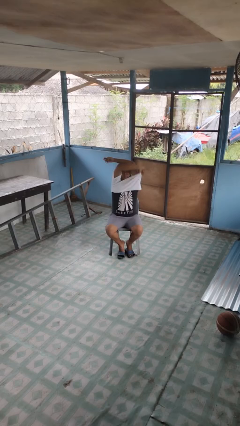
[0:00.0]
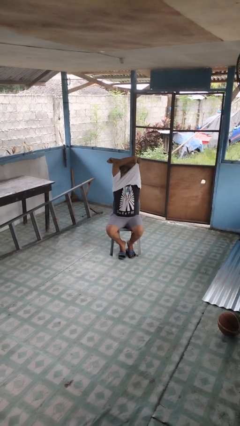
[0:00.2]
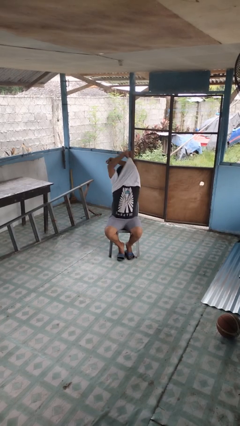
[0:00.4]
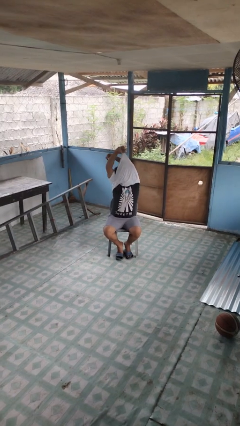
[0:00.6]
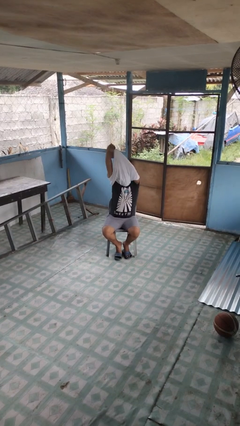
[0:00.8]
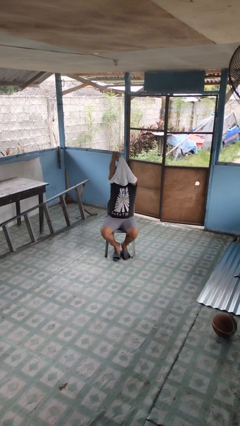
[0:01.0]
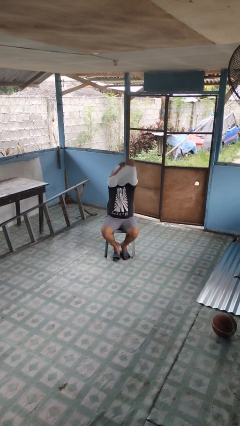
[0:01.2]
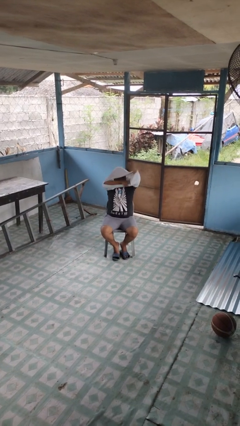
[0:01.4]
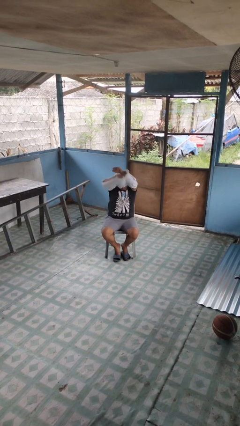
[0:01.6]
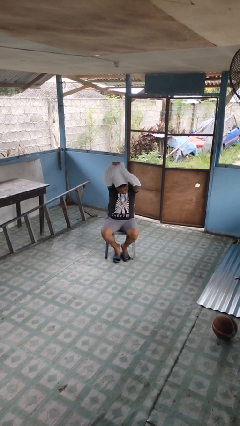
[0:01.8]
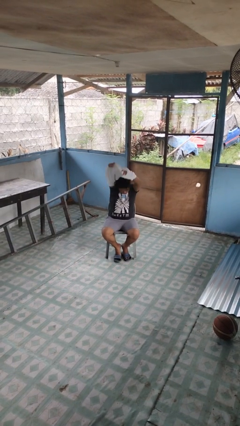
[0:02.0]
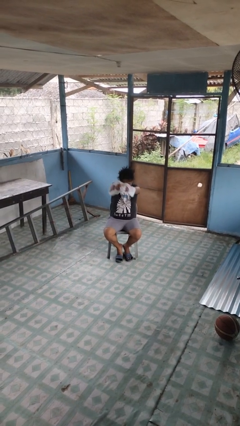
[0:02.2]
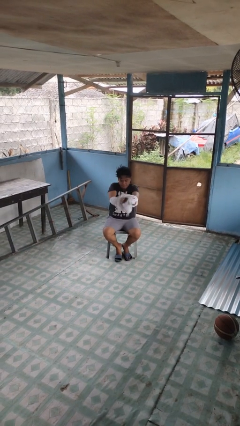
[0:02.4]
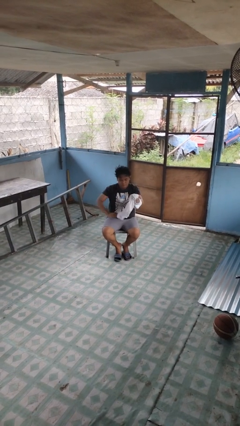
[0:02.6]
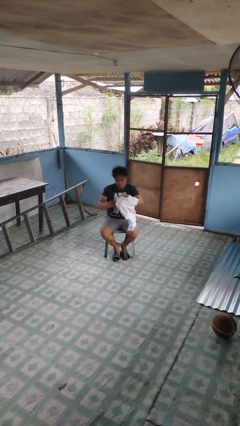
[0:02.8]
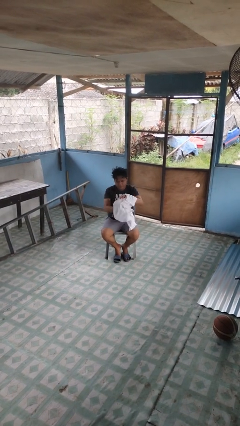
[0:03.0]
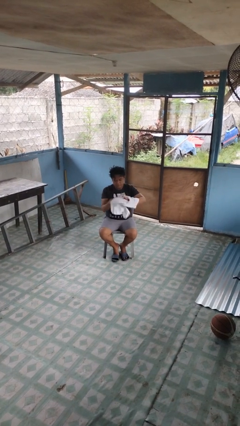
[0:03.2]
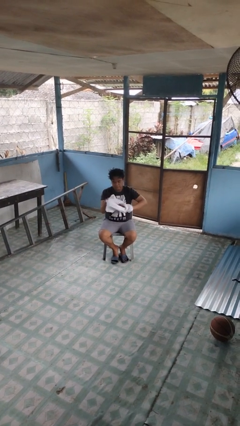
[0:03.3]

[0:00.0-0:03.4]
person takes off shirt

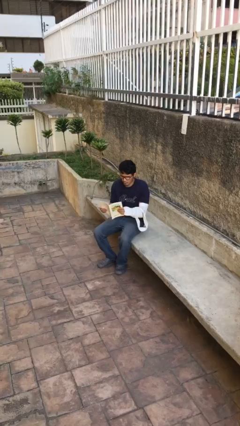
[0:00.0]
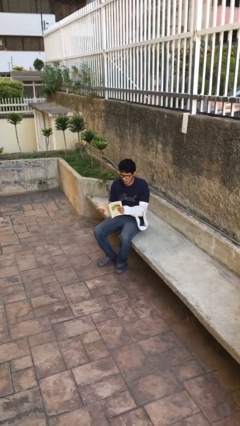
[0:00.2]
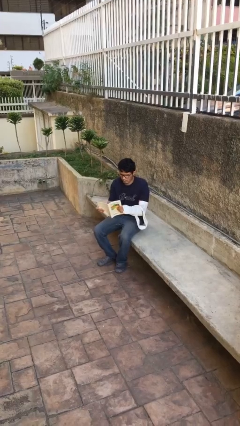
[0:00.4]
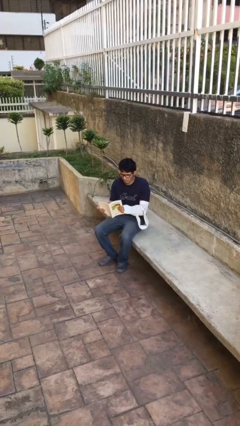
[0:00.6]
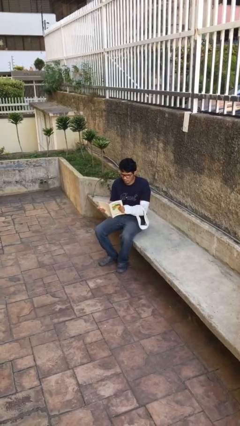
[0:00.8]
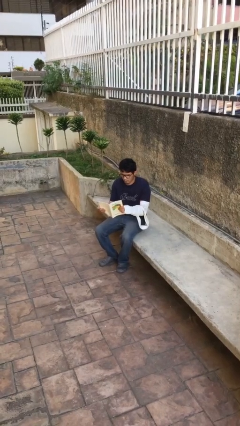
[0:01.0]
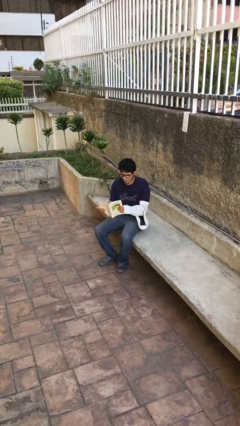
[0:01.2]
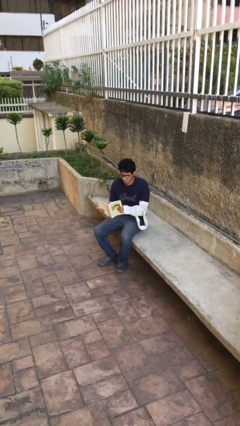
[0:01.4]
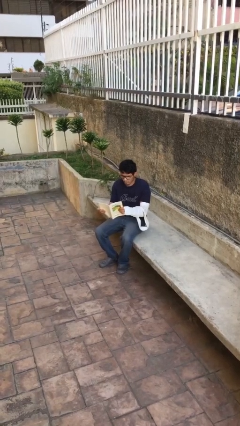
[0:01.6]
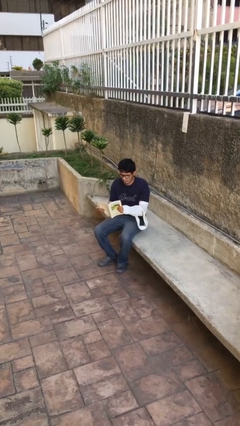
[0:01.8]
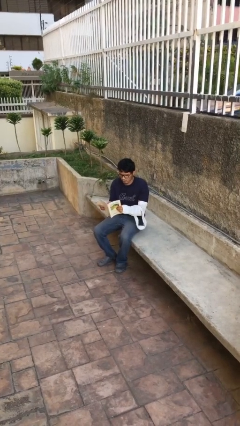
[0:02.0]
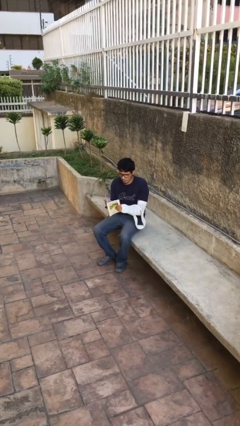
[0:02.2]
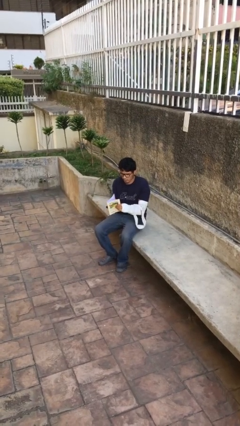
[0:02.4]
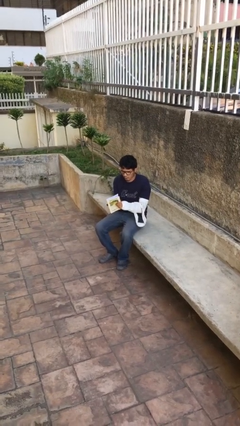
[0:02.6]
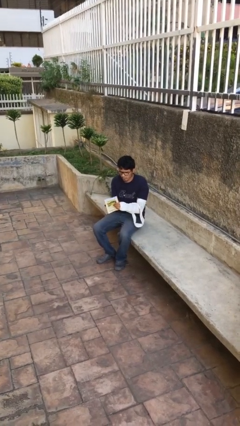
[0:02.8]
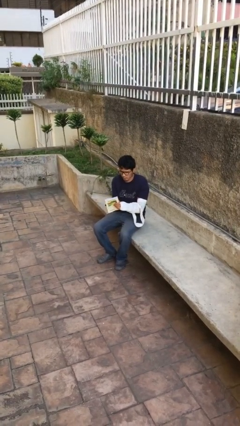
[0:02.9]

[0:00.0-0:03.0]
person reads document

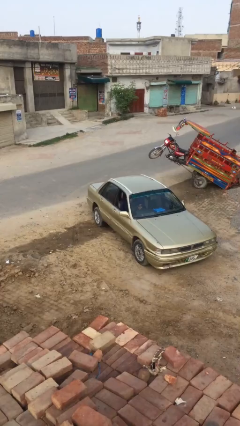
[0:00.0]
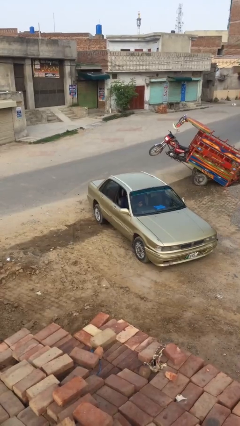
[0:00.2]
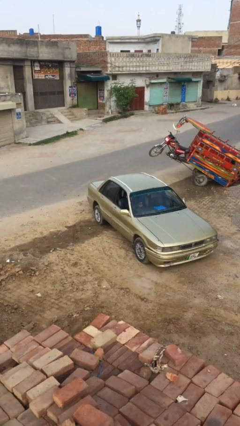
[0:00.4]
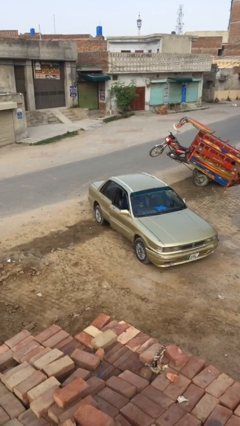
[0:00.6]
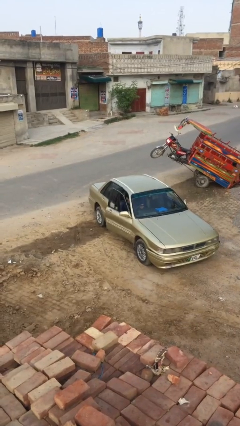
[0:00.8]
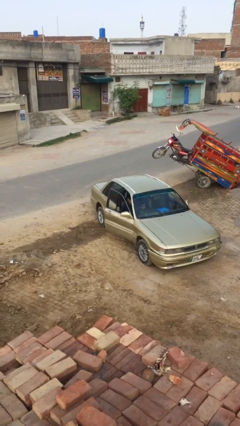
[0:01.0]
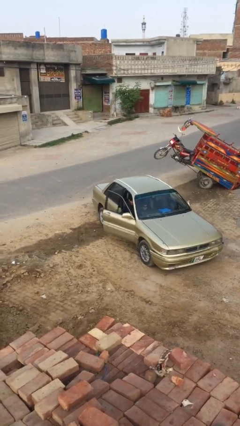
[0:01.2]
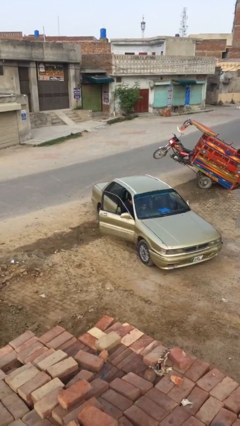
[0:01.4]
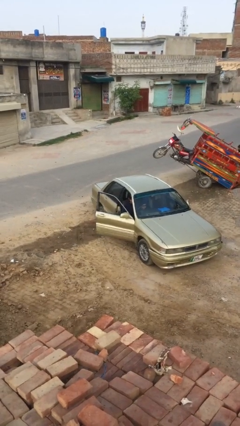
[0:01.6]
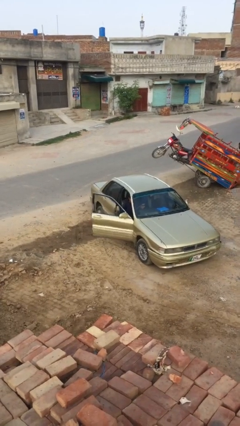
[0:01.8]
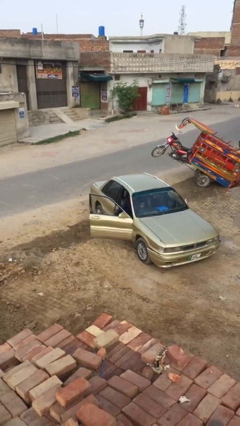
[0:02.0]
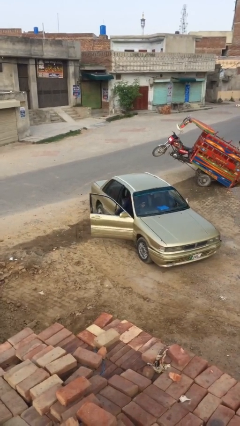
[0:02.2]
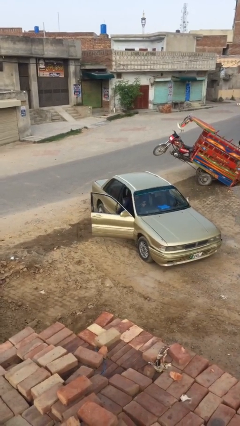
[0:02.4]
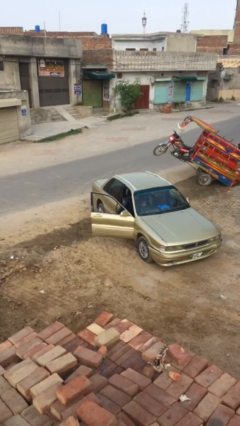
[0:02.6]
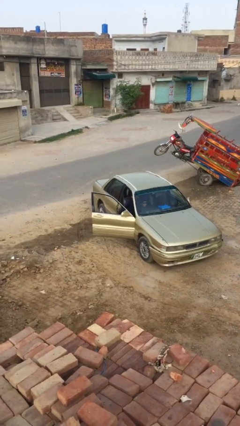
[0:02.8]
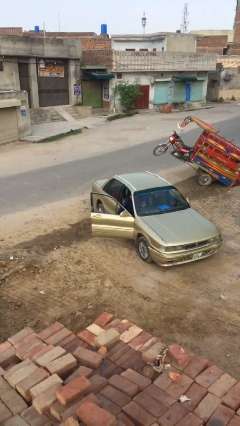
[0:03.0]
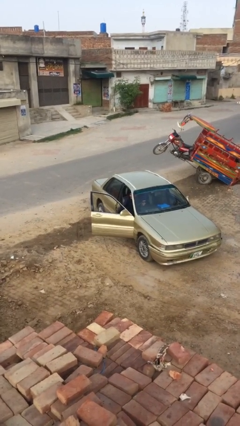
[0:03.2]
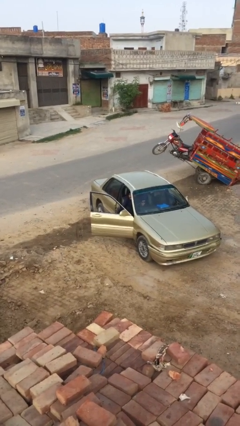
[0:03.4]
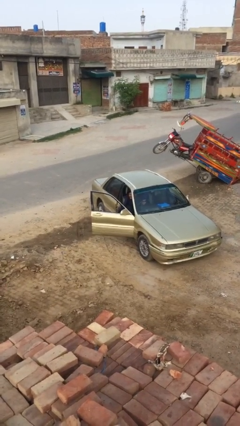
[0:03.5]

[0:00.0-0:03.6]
person opens car door

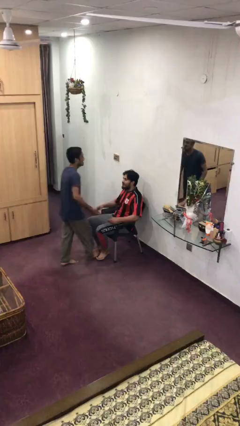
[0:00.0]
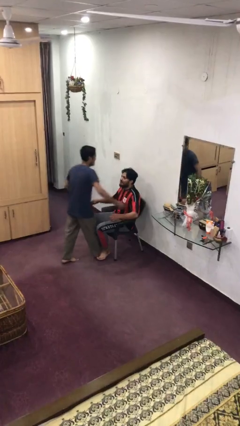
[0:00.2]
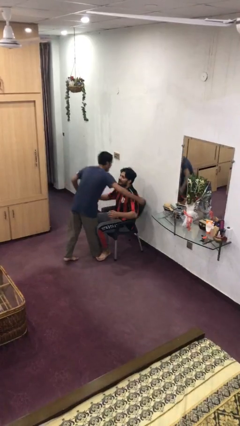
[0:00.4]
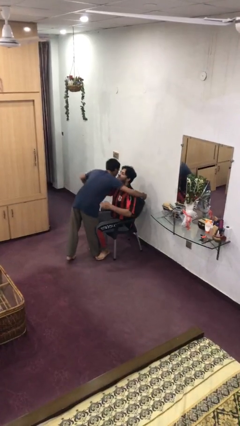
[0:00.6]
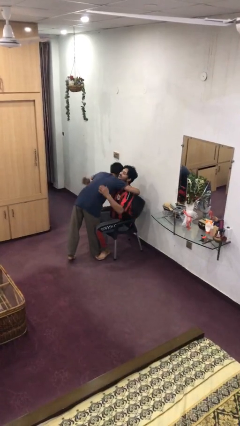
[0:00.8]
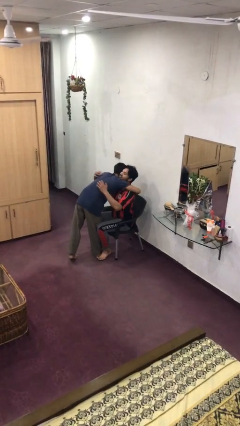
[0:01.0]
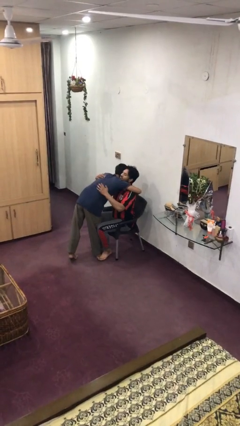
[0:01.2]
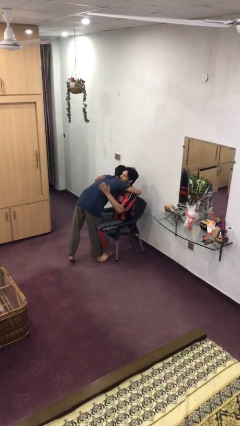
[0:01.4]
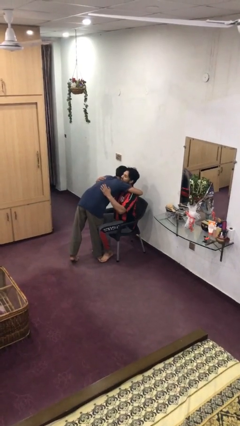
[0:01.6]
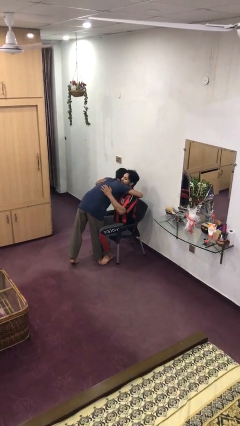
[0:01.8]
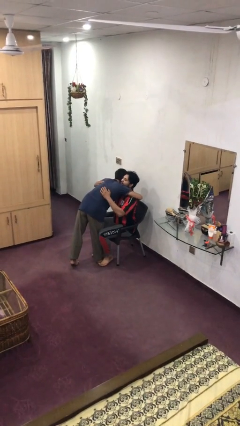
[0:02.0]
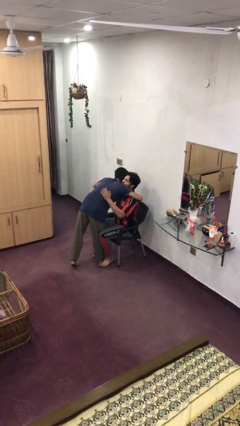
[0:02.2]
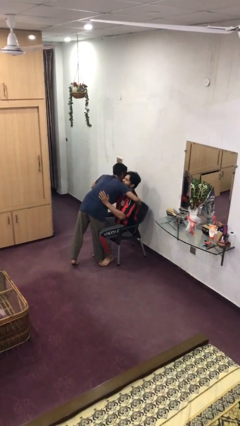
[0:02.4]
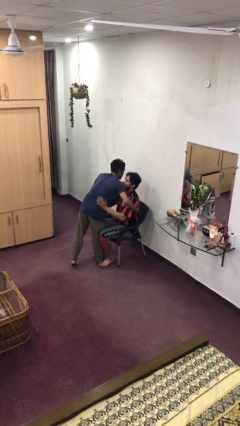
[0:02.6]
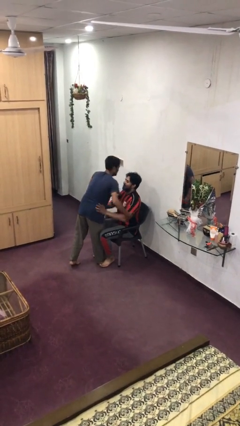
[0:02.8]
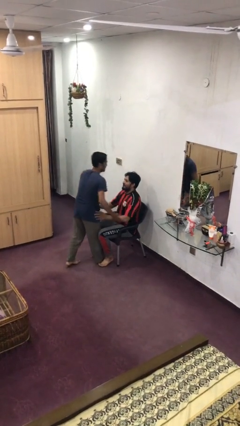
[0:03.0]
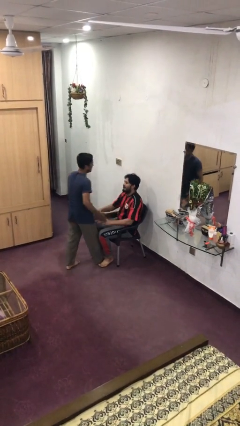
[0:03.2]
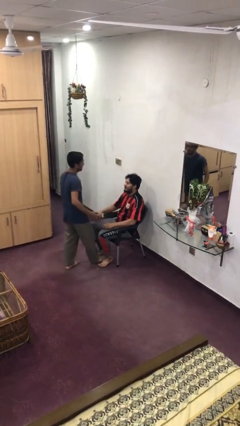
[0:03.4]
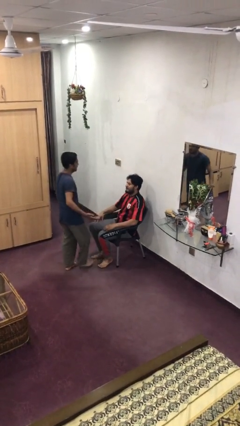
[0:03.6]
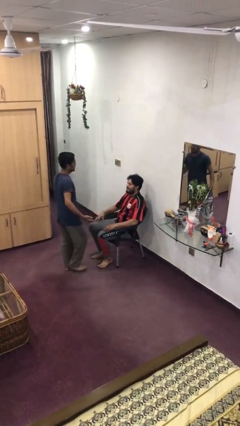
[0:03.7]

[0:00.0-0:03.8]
person embraces person

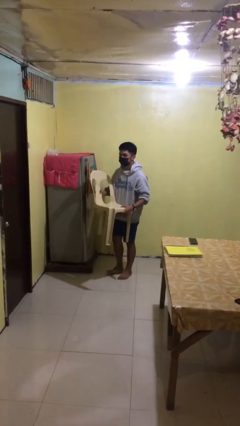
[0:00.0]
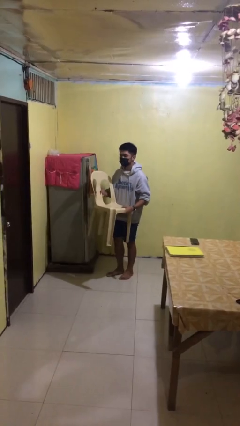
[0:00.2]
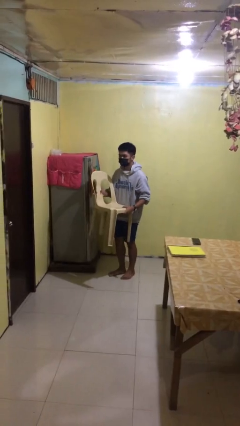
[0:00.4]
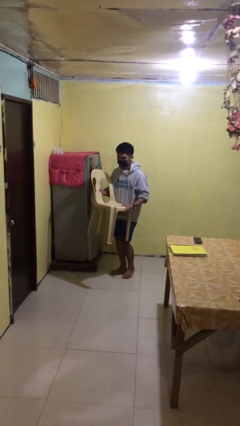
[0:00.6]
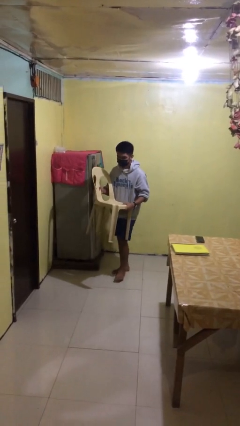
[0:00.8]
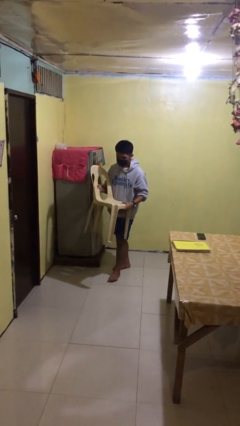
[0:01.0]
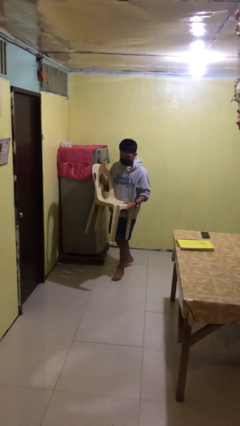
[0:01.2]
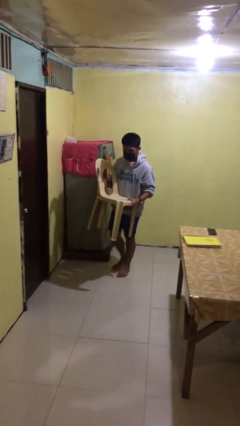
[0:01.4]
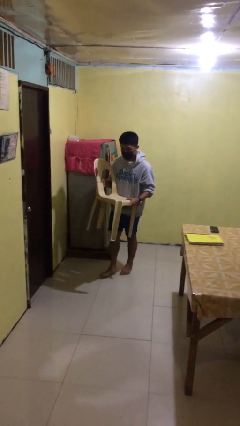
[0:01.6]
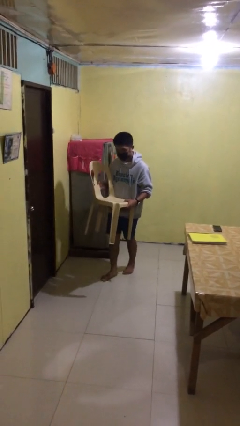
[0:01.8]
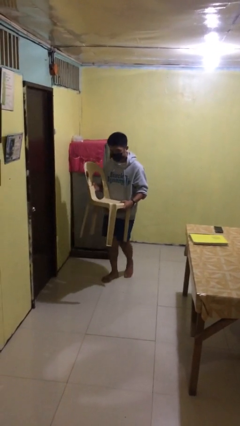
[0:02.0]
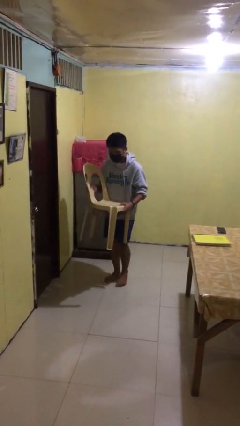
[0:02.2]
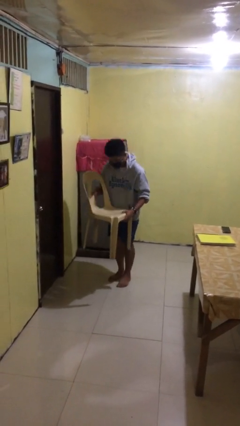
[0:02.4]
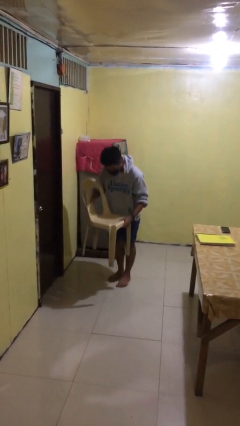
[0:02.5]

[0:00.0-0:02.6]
person carries heavy object

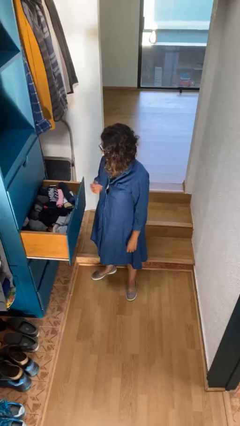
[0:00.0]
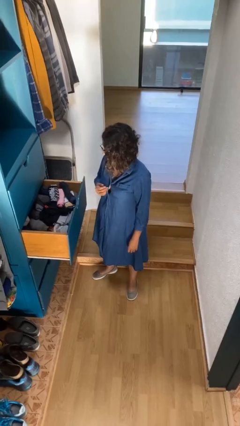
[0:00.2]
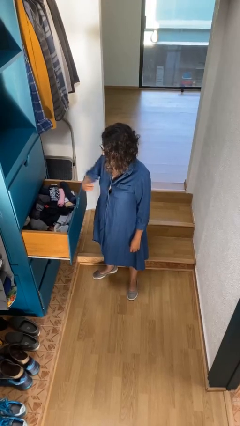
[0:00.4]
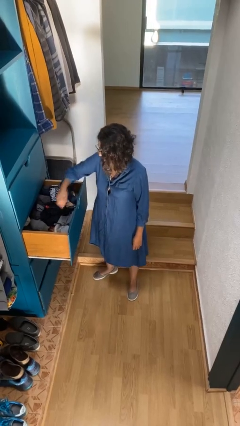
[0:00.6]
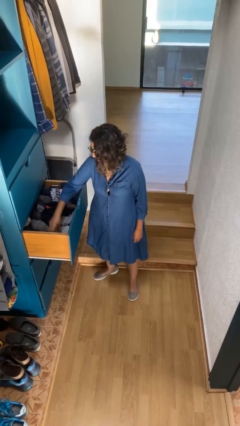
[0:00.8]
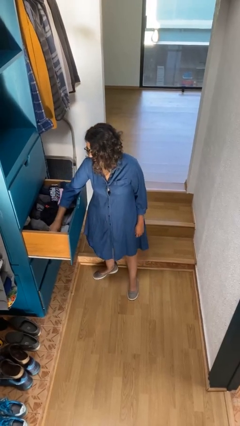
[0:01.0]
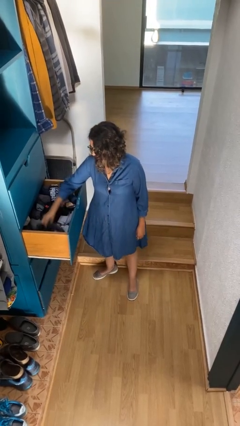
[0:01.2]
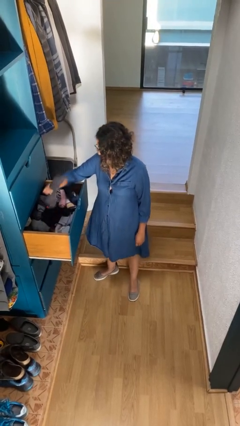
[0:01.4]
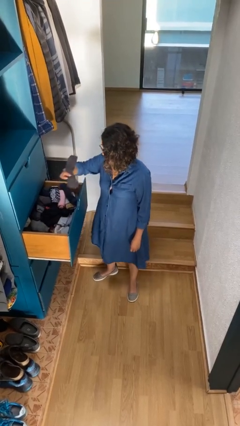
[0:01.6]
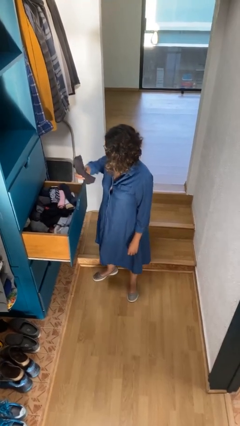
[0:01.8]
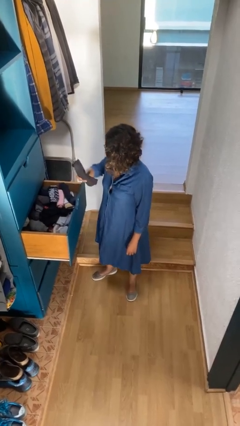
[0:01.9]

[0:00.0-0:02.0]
person takes clothes from dresser
